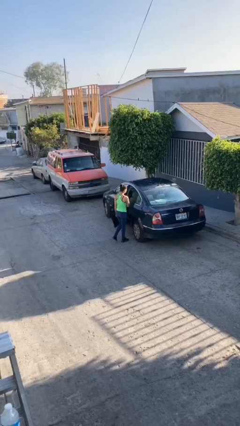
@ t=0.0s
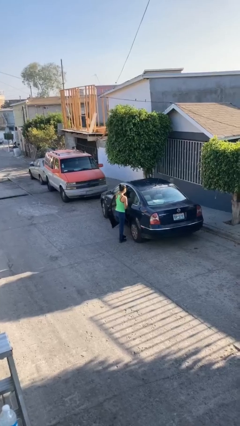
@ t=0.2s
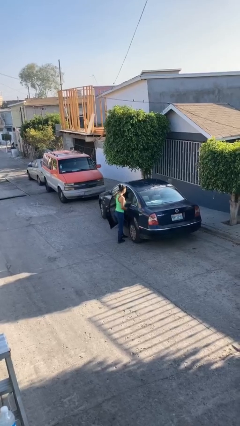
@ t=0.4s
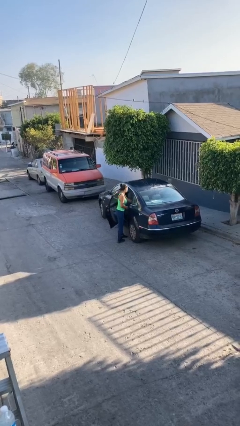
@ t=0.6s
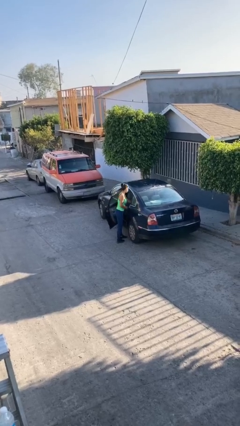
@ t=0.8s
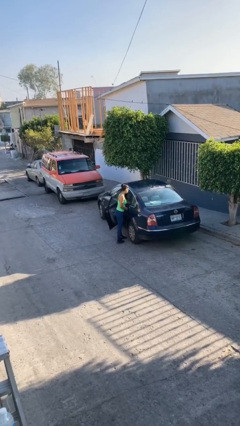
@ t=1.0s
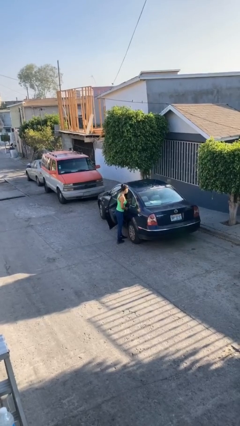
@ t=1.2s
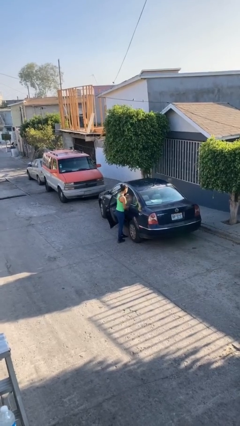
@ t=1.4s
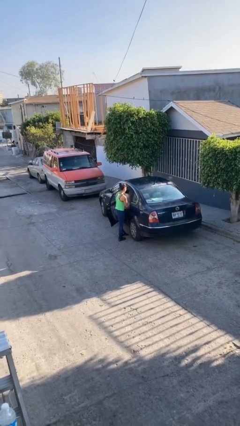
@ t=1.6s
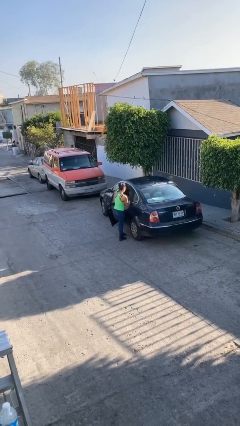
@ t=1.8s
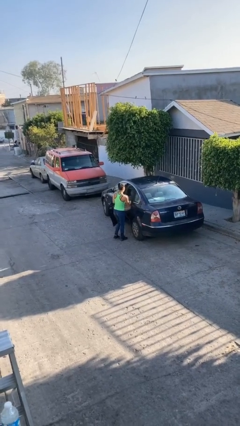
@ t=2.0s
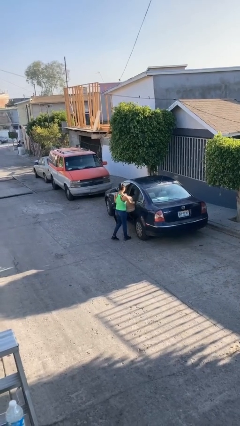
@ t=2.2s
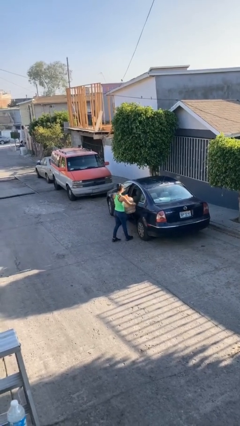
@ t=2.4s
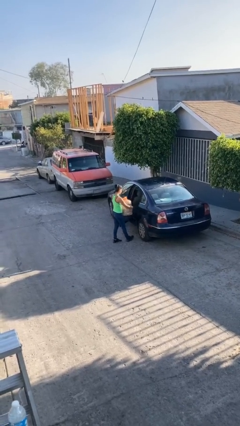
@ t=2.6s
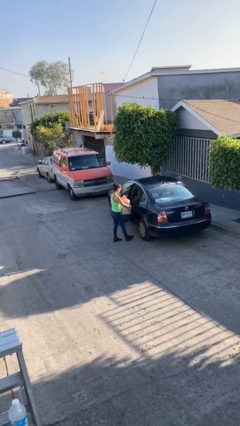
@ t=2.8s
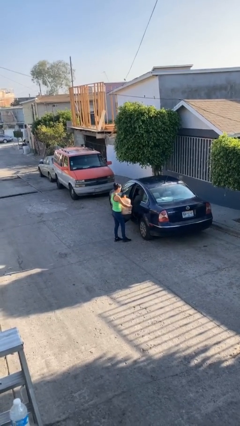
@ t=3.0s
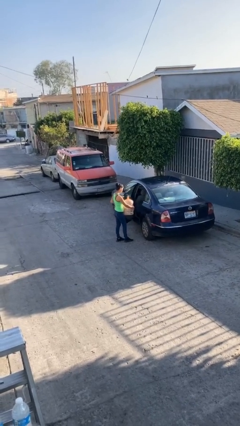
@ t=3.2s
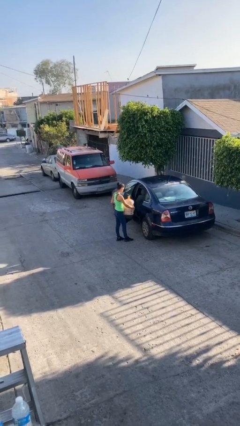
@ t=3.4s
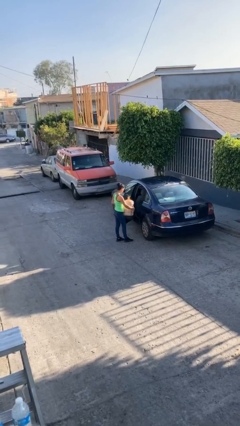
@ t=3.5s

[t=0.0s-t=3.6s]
person unloads car

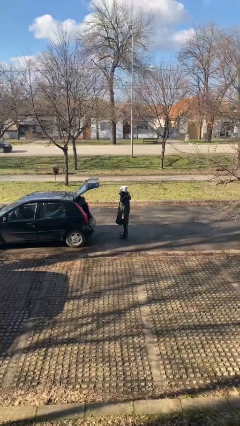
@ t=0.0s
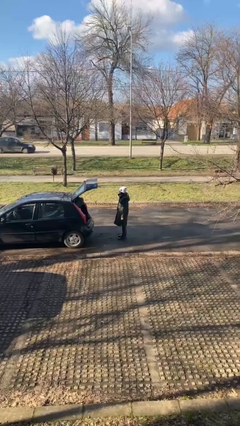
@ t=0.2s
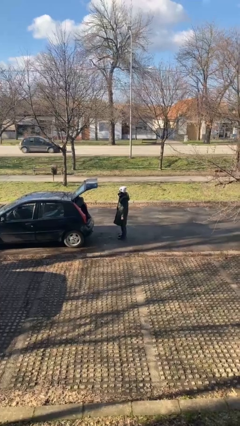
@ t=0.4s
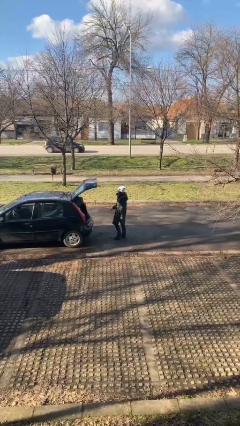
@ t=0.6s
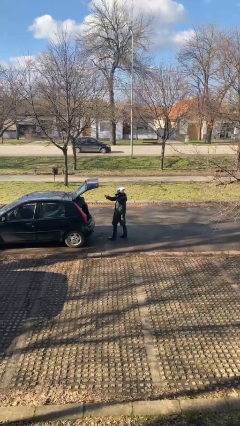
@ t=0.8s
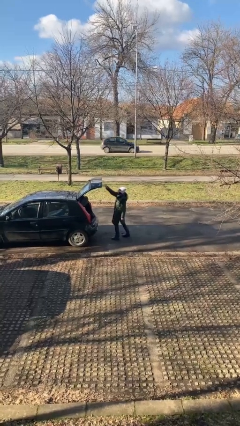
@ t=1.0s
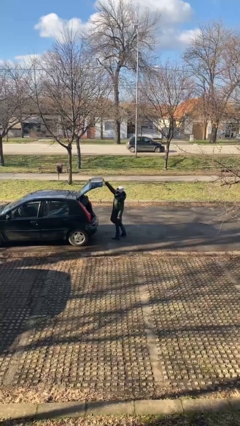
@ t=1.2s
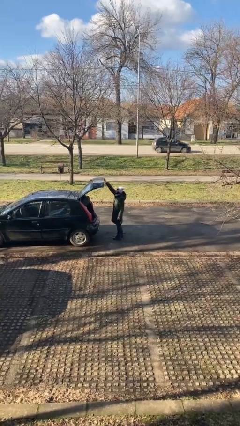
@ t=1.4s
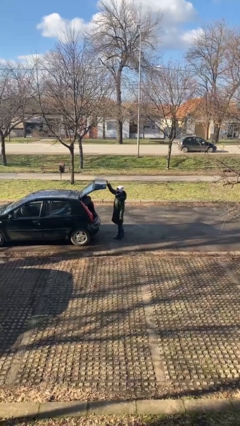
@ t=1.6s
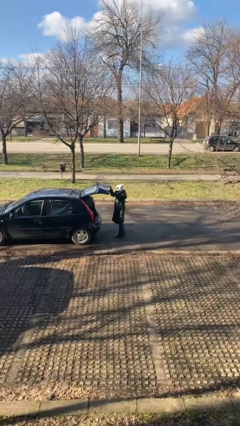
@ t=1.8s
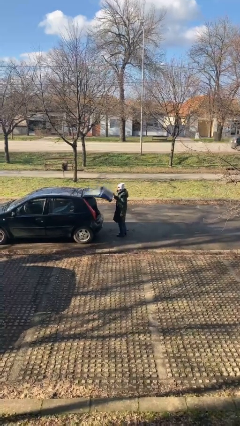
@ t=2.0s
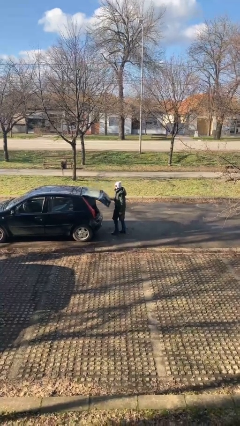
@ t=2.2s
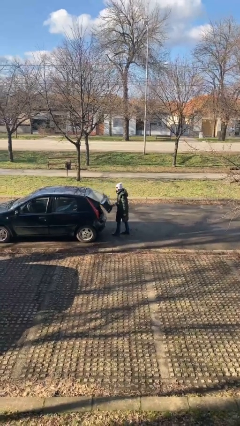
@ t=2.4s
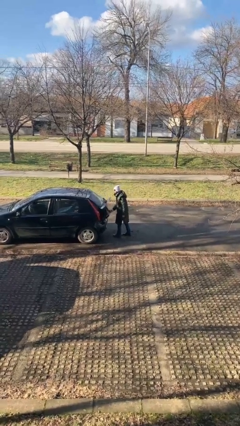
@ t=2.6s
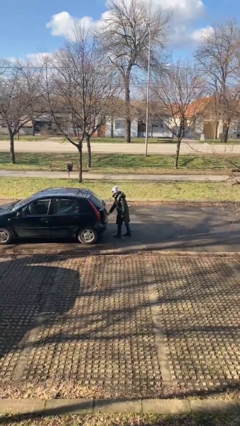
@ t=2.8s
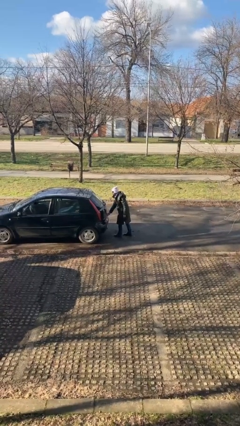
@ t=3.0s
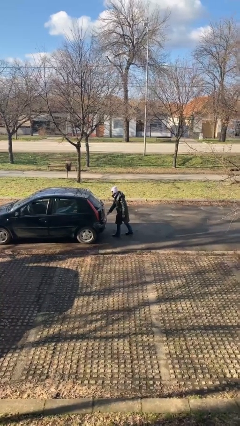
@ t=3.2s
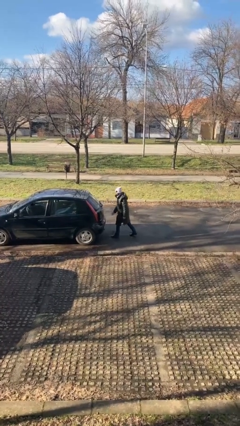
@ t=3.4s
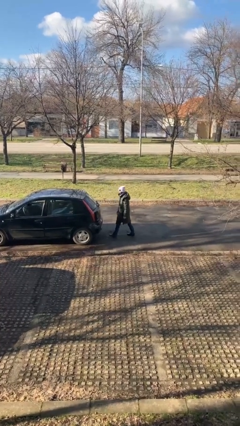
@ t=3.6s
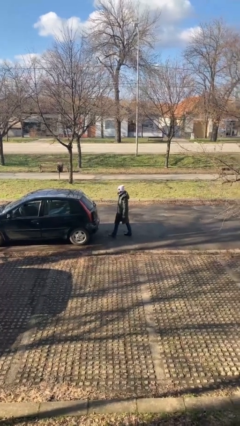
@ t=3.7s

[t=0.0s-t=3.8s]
person closes car trunk

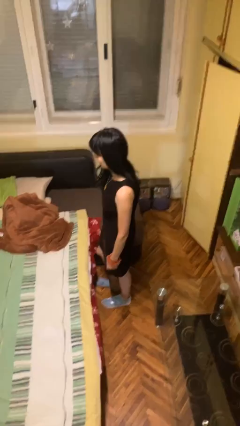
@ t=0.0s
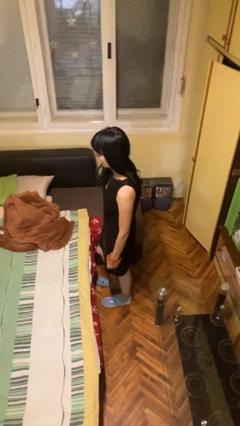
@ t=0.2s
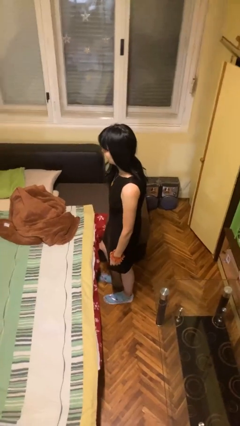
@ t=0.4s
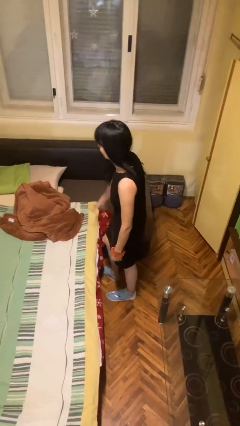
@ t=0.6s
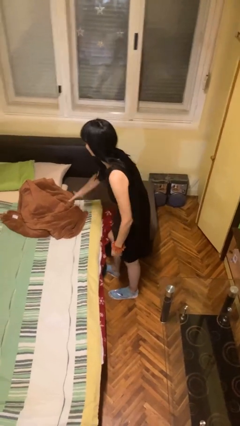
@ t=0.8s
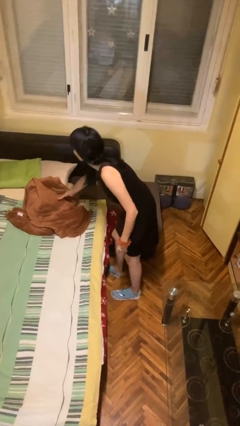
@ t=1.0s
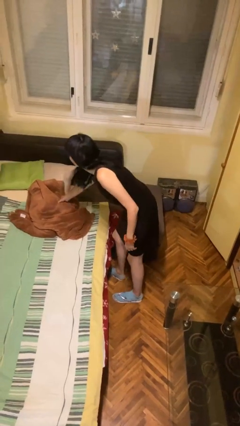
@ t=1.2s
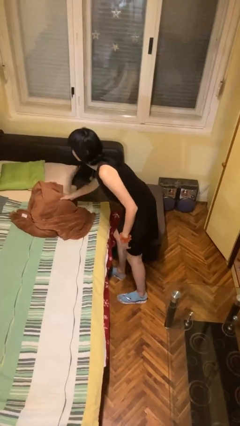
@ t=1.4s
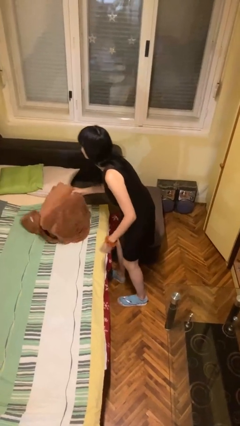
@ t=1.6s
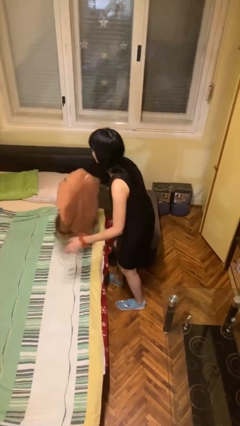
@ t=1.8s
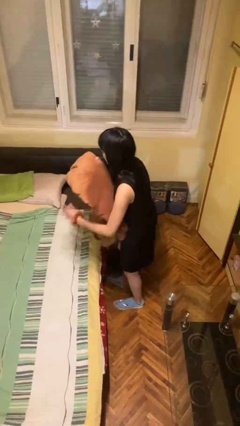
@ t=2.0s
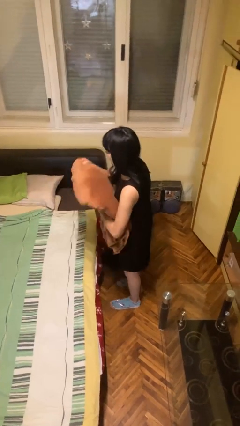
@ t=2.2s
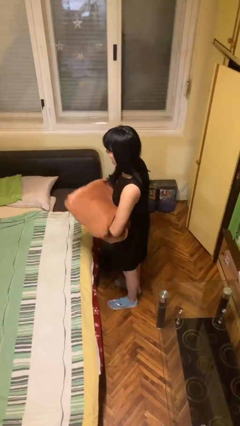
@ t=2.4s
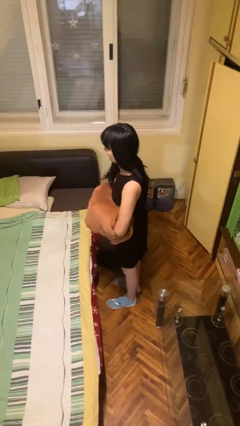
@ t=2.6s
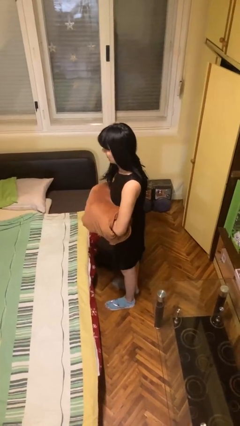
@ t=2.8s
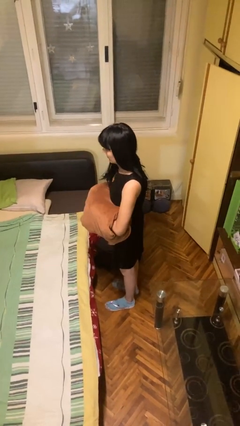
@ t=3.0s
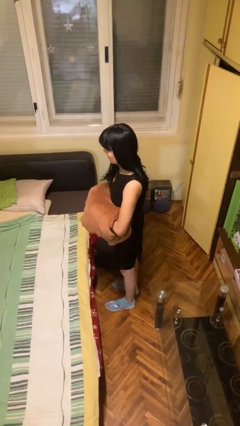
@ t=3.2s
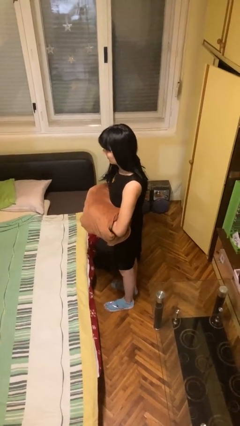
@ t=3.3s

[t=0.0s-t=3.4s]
person picks up object from bed

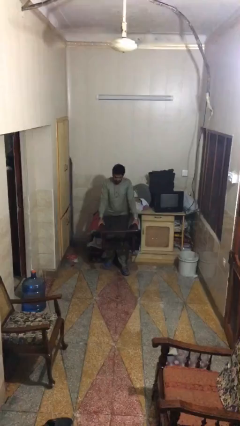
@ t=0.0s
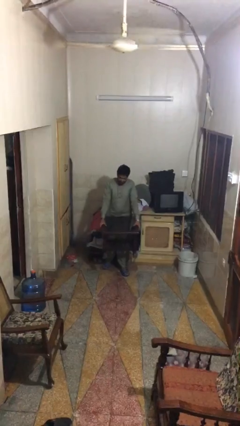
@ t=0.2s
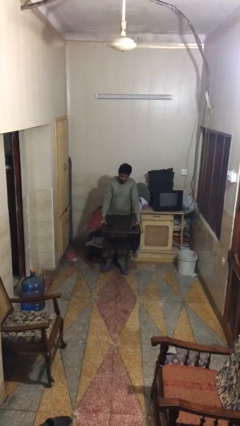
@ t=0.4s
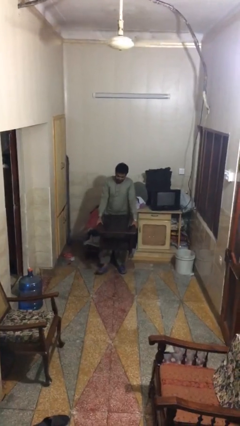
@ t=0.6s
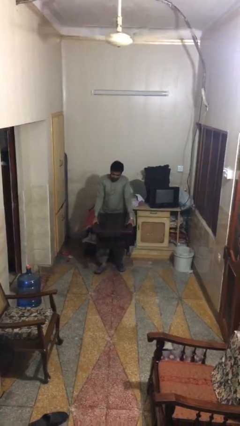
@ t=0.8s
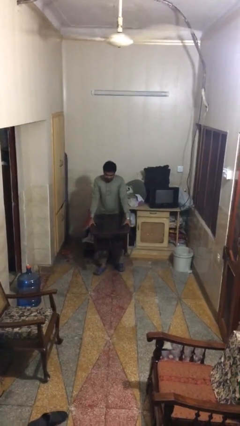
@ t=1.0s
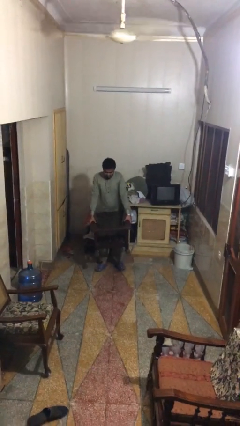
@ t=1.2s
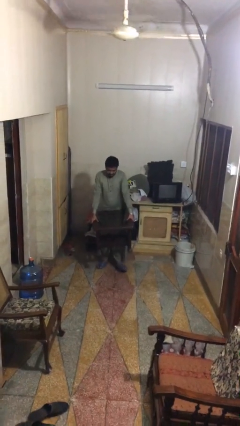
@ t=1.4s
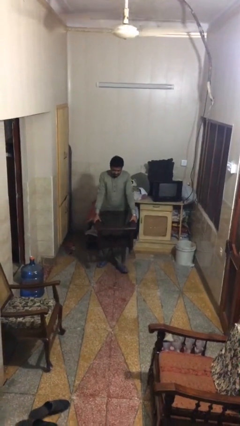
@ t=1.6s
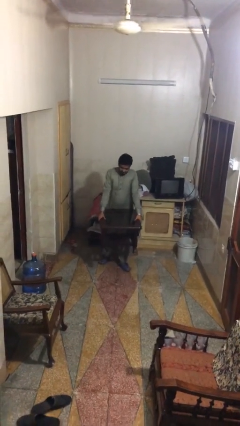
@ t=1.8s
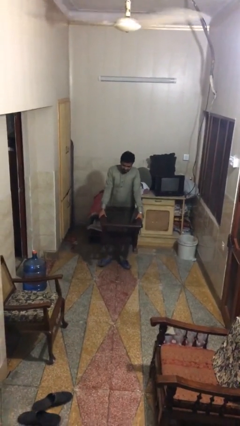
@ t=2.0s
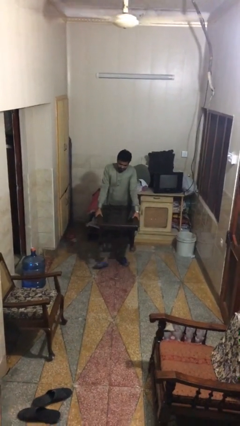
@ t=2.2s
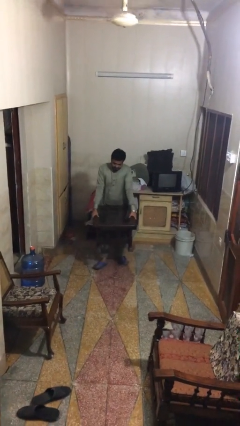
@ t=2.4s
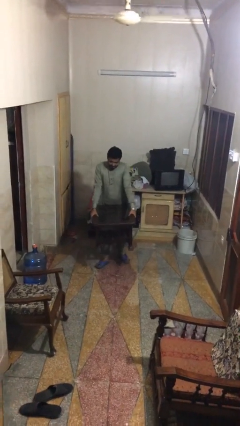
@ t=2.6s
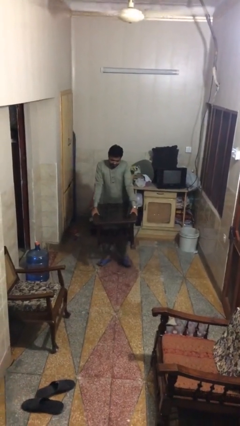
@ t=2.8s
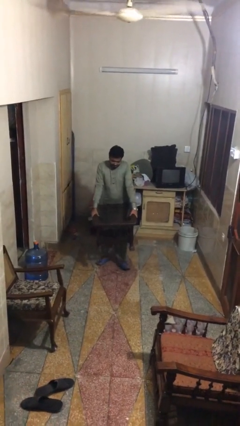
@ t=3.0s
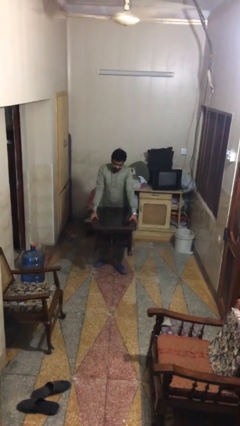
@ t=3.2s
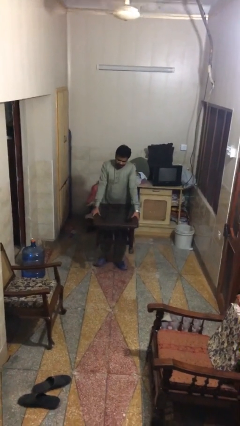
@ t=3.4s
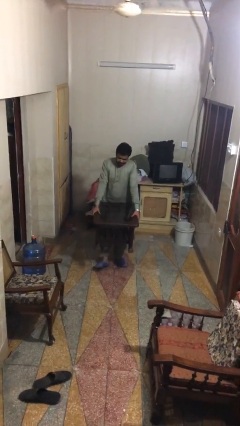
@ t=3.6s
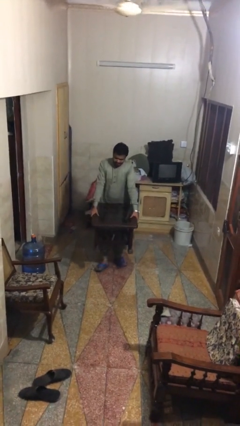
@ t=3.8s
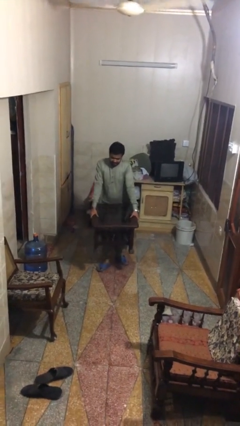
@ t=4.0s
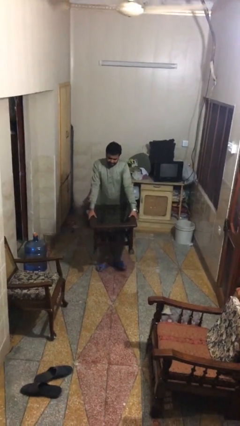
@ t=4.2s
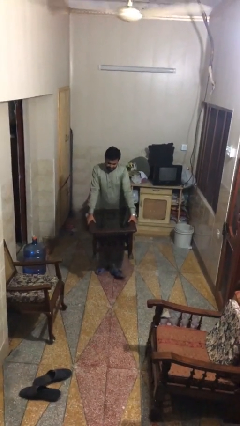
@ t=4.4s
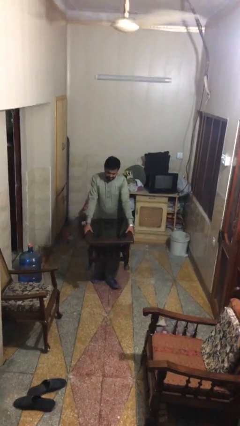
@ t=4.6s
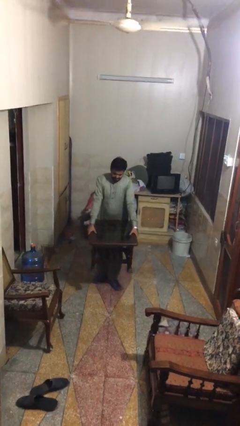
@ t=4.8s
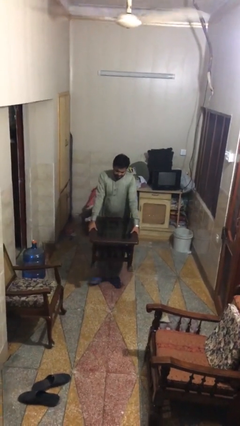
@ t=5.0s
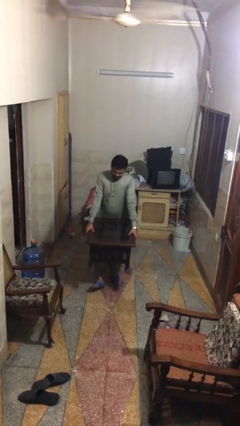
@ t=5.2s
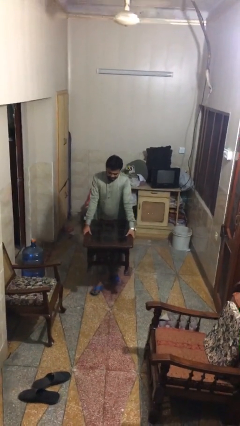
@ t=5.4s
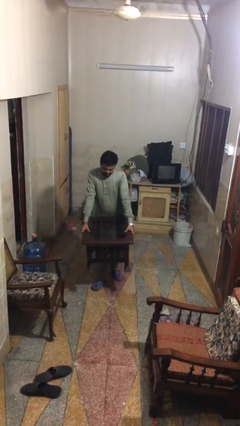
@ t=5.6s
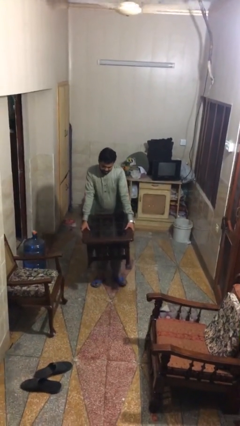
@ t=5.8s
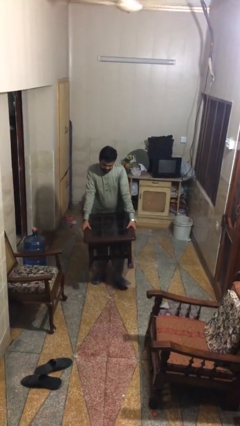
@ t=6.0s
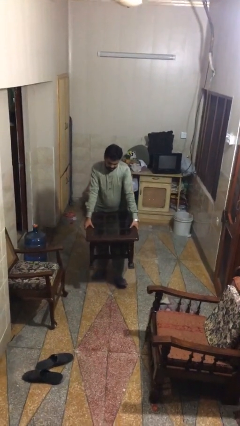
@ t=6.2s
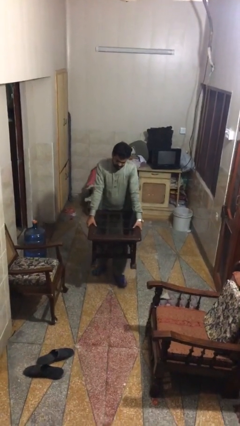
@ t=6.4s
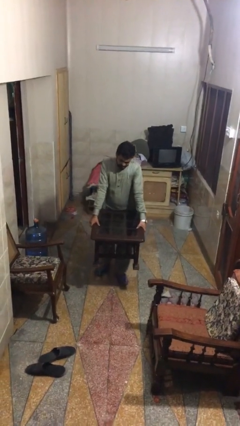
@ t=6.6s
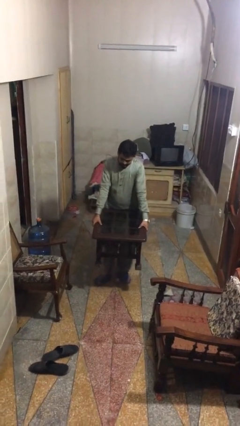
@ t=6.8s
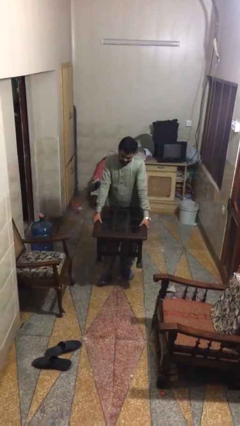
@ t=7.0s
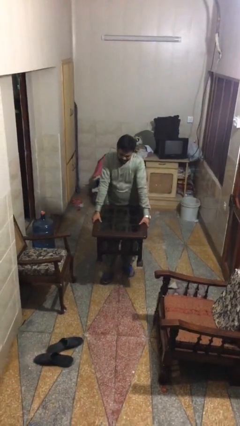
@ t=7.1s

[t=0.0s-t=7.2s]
person carries heavy object
